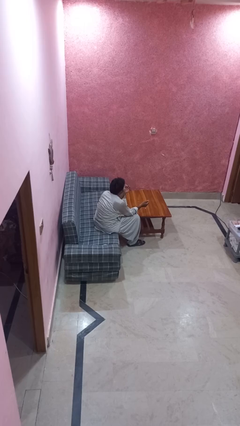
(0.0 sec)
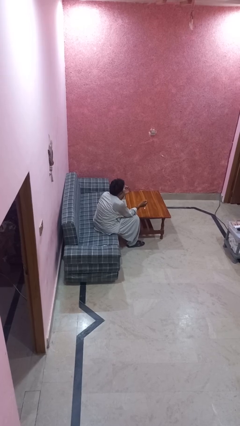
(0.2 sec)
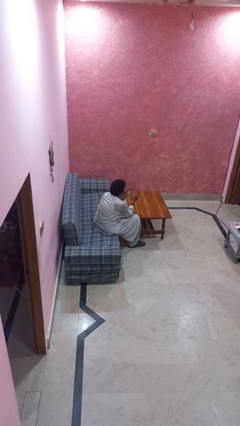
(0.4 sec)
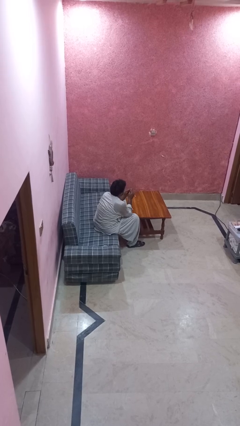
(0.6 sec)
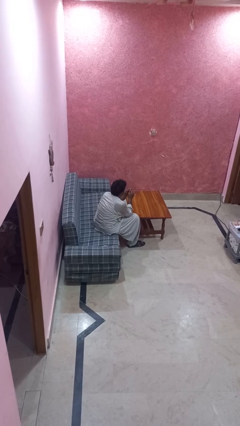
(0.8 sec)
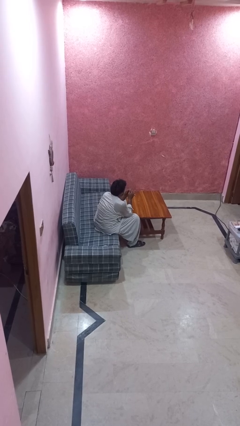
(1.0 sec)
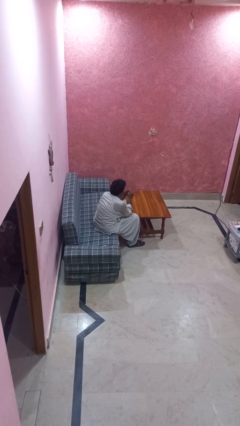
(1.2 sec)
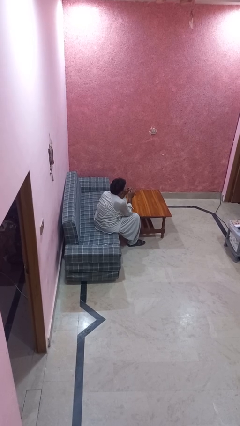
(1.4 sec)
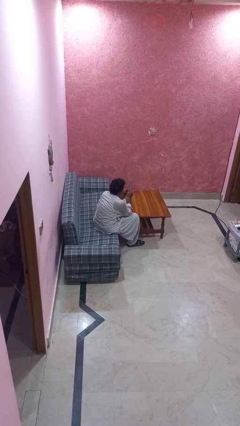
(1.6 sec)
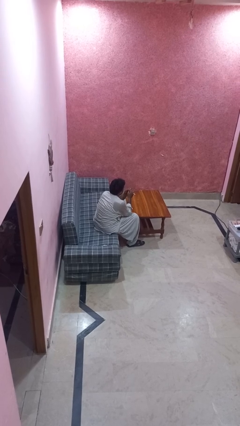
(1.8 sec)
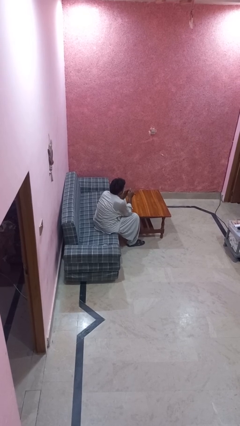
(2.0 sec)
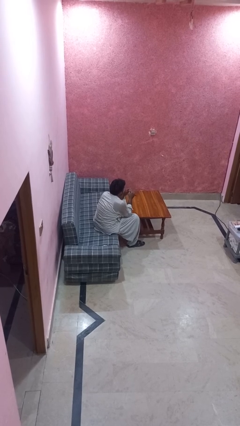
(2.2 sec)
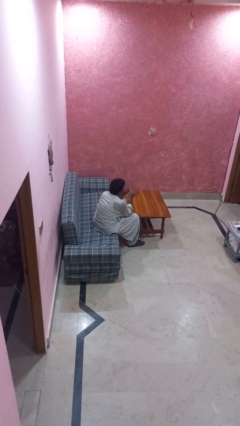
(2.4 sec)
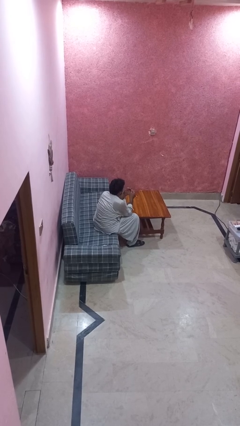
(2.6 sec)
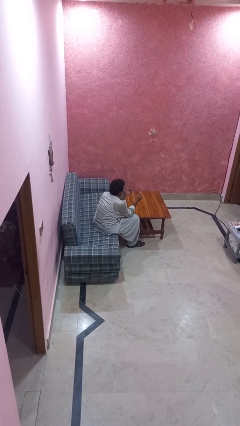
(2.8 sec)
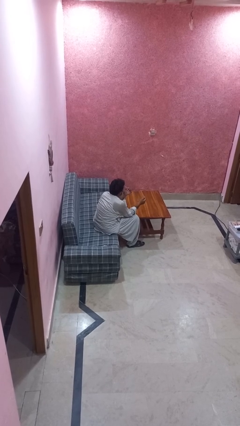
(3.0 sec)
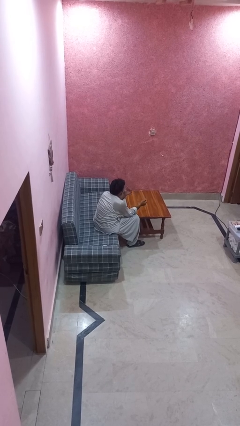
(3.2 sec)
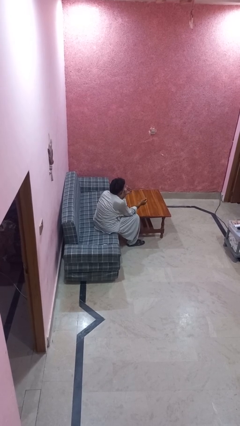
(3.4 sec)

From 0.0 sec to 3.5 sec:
person files fingernails

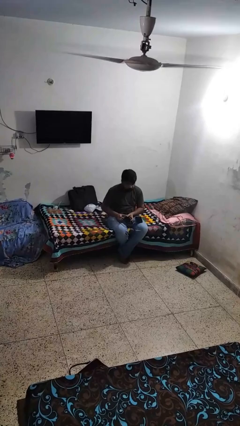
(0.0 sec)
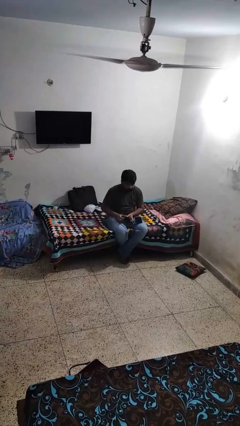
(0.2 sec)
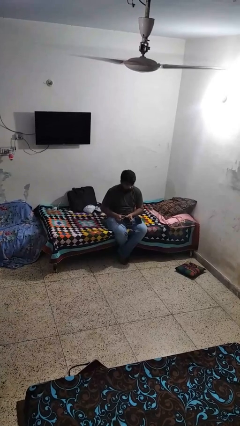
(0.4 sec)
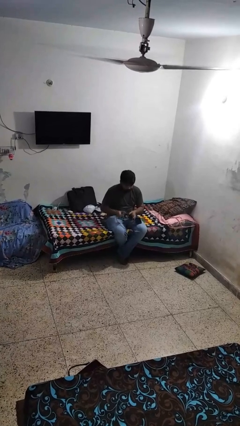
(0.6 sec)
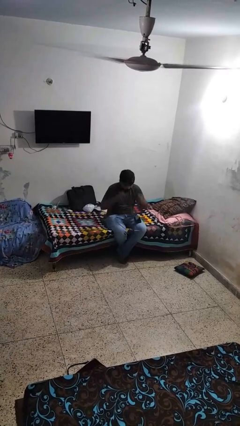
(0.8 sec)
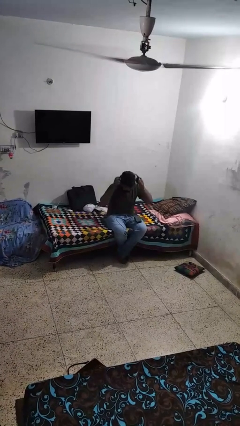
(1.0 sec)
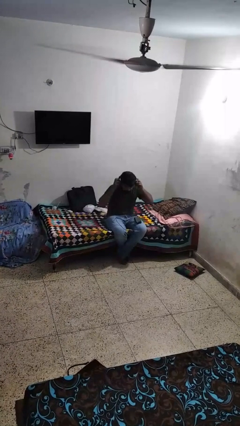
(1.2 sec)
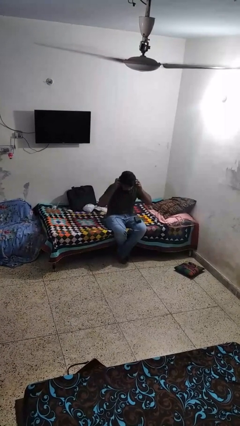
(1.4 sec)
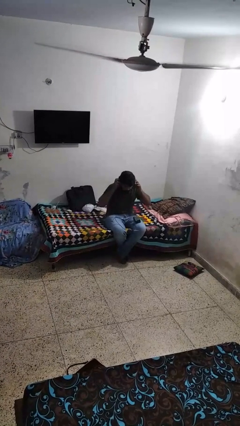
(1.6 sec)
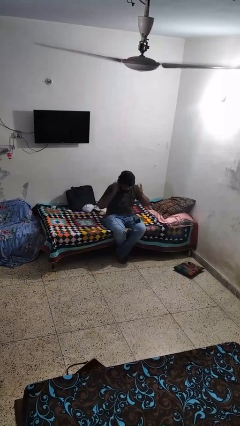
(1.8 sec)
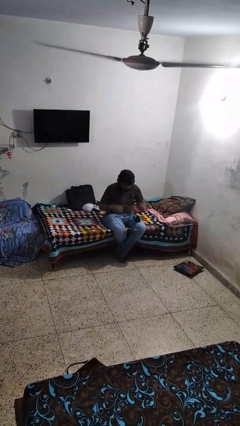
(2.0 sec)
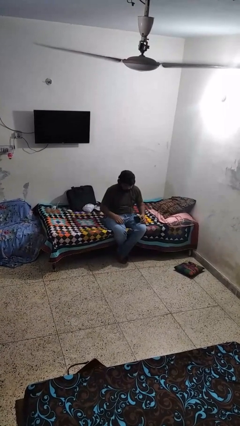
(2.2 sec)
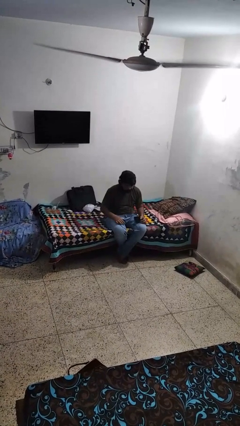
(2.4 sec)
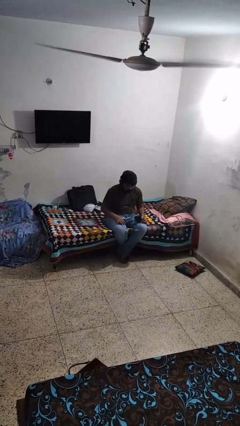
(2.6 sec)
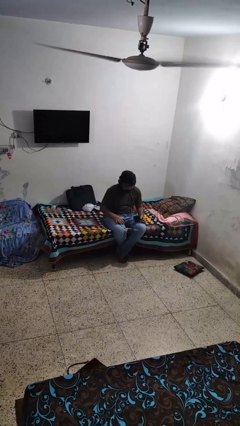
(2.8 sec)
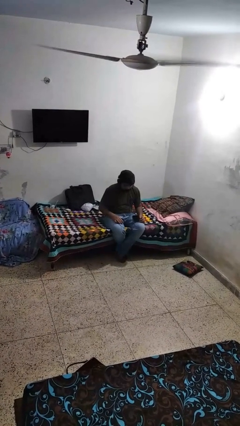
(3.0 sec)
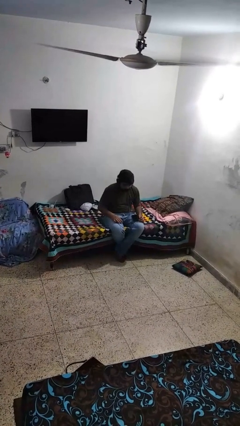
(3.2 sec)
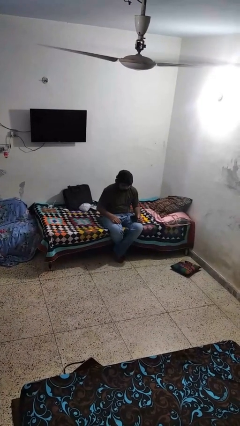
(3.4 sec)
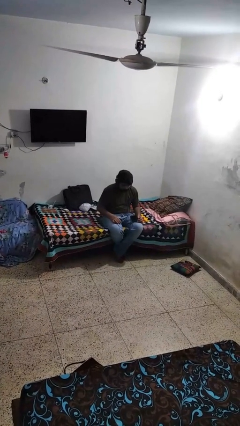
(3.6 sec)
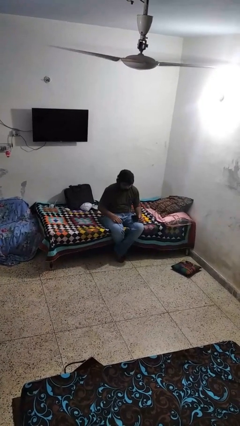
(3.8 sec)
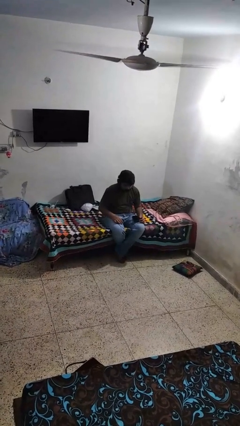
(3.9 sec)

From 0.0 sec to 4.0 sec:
person puts on headphones

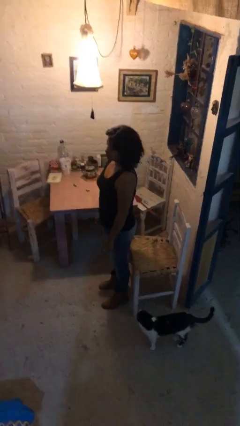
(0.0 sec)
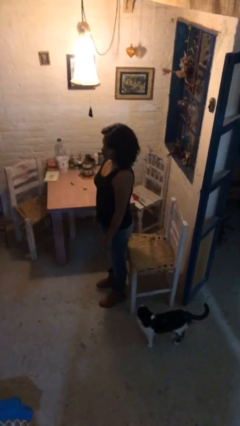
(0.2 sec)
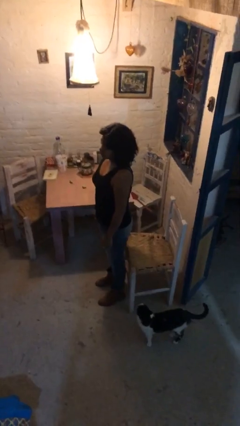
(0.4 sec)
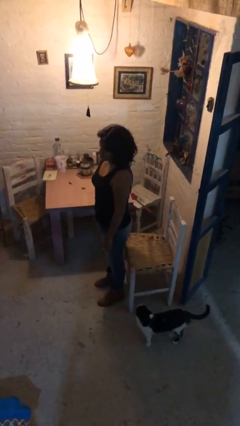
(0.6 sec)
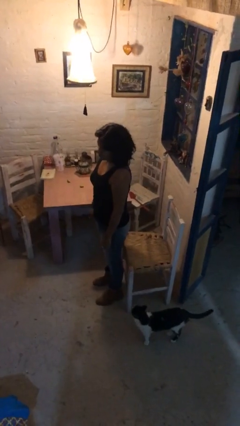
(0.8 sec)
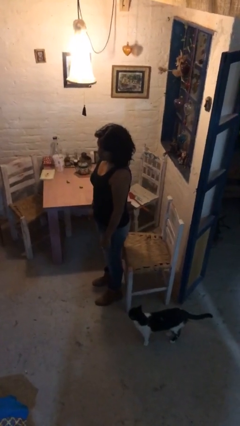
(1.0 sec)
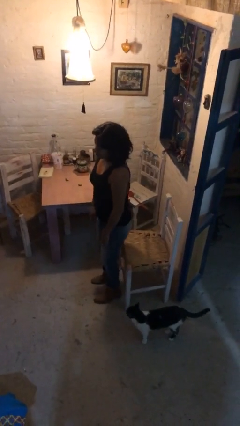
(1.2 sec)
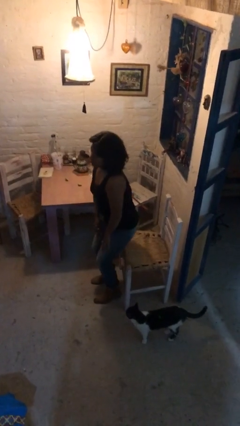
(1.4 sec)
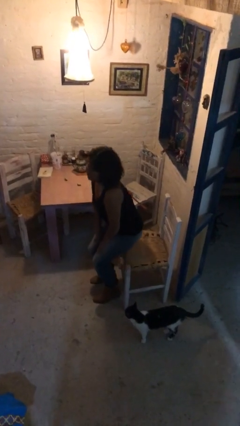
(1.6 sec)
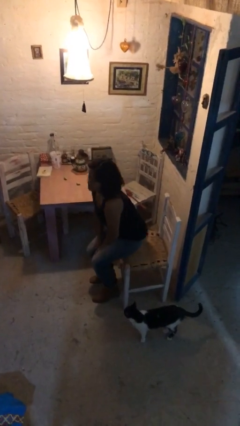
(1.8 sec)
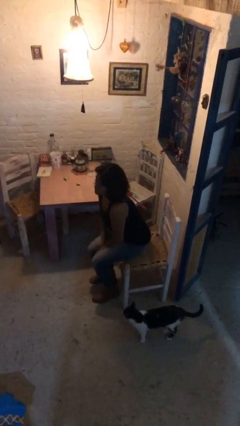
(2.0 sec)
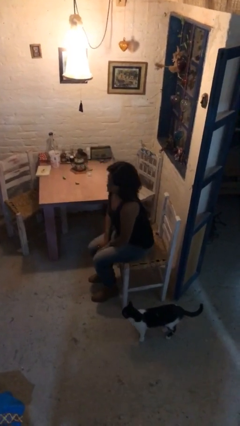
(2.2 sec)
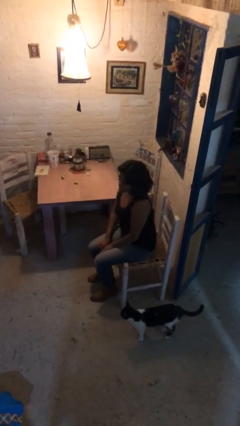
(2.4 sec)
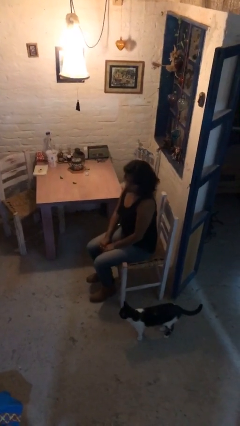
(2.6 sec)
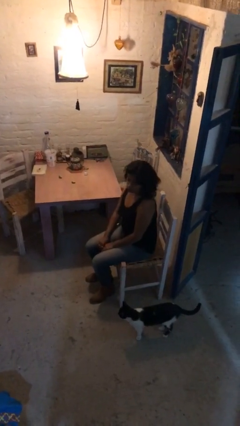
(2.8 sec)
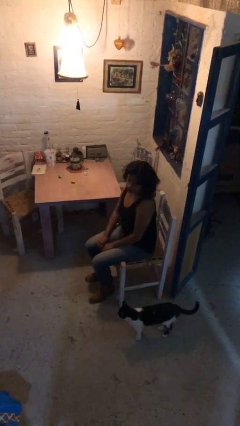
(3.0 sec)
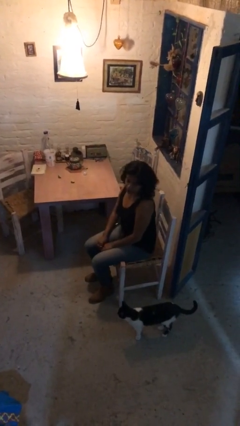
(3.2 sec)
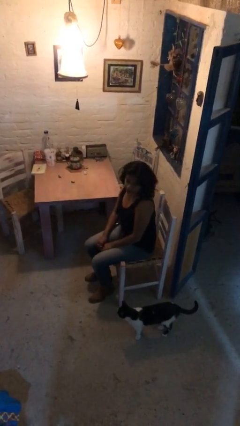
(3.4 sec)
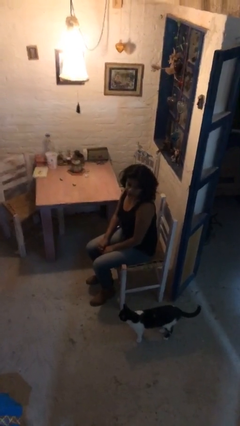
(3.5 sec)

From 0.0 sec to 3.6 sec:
person sits down

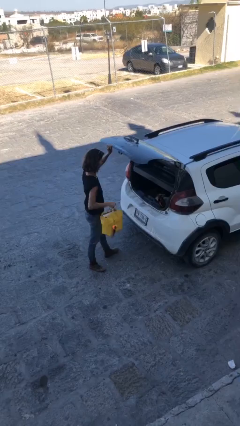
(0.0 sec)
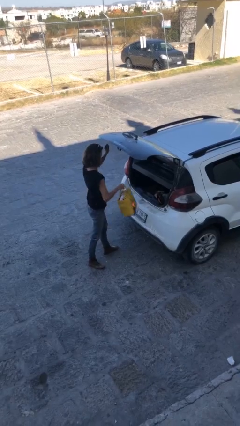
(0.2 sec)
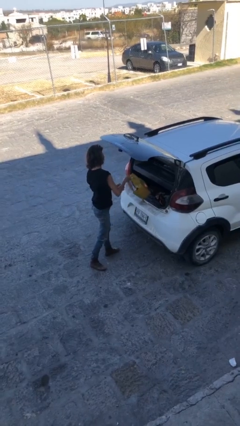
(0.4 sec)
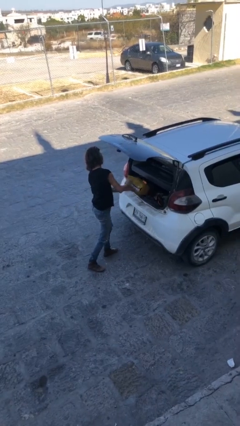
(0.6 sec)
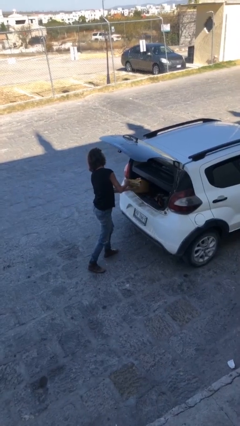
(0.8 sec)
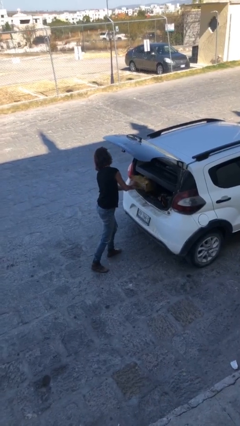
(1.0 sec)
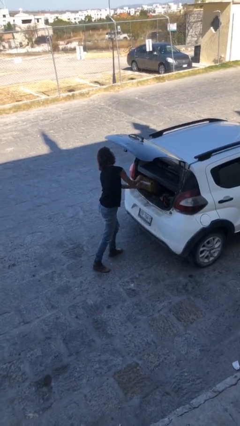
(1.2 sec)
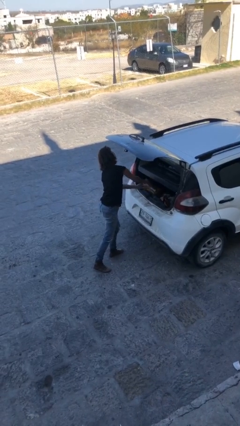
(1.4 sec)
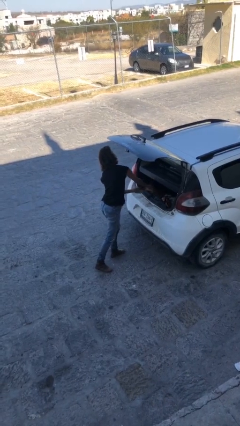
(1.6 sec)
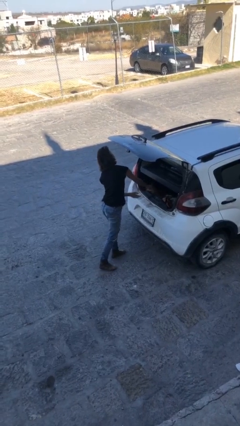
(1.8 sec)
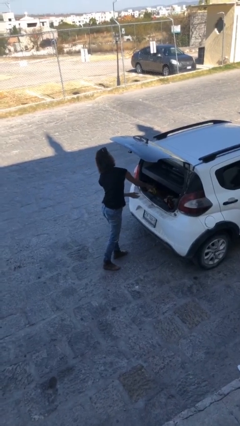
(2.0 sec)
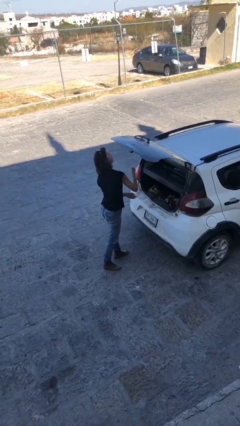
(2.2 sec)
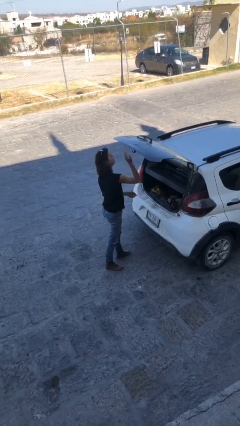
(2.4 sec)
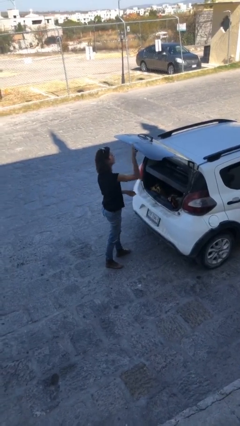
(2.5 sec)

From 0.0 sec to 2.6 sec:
person loads car

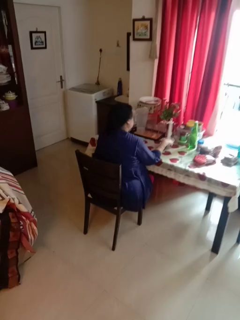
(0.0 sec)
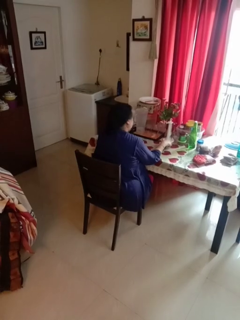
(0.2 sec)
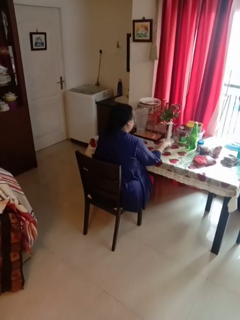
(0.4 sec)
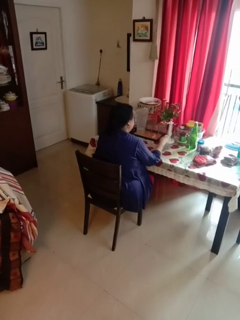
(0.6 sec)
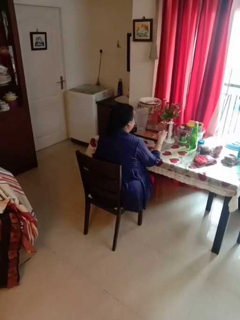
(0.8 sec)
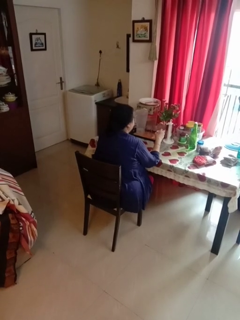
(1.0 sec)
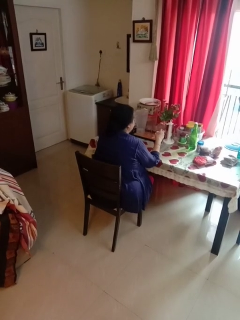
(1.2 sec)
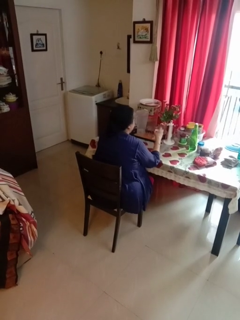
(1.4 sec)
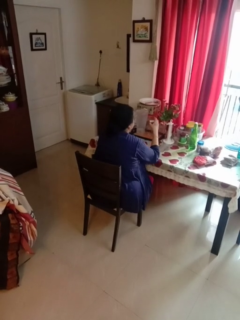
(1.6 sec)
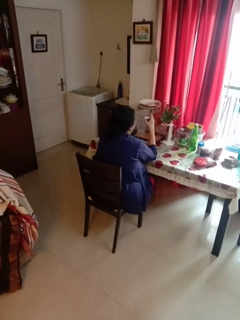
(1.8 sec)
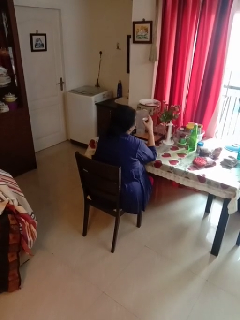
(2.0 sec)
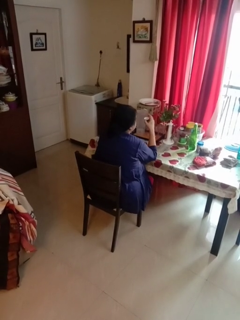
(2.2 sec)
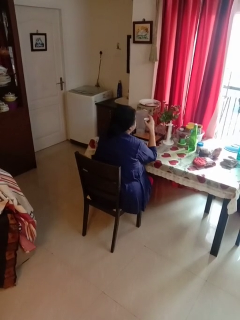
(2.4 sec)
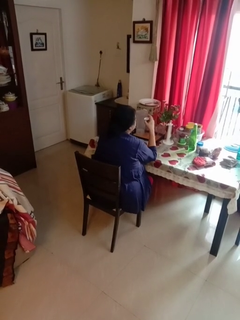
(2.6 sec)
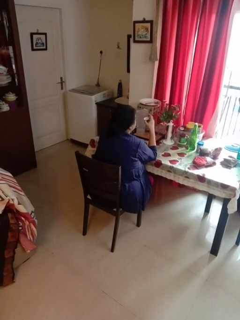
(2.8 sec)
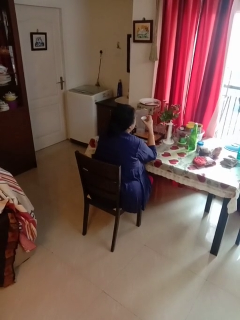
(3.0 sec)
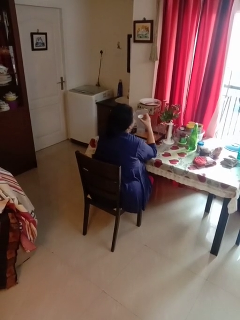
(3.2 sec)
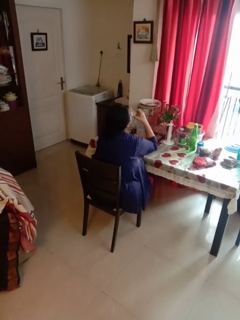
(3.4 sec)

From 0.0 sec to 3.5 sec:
person picks up object from table

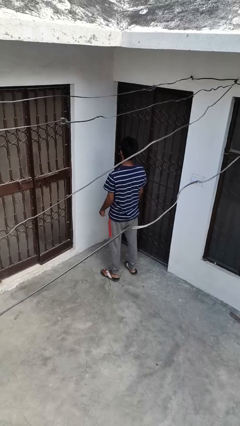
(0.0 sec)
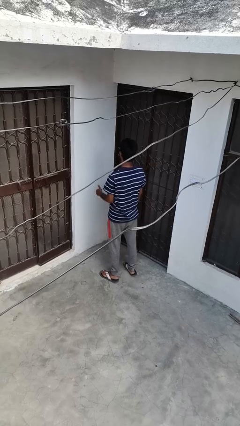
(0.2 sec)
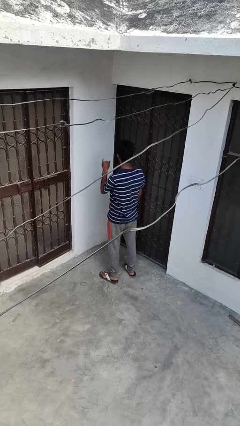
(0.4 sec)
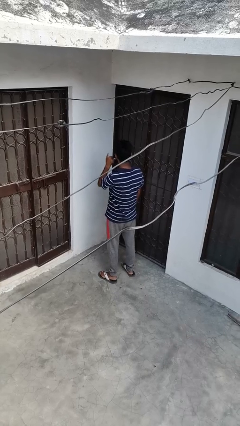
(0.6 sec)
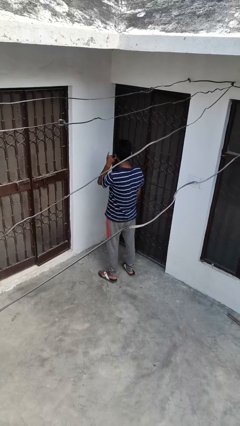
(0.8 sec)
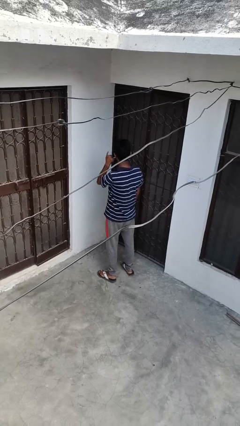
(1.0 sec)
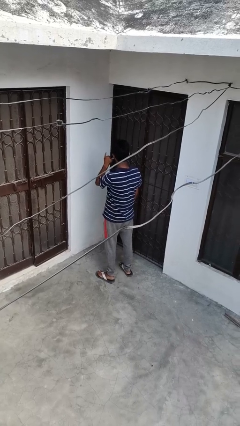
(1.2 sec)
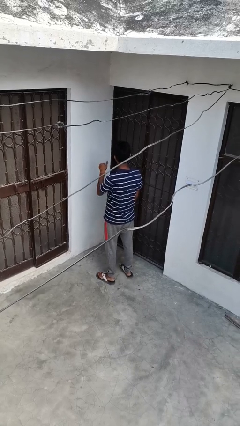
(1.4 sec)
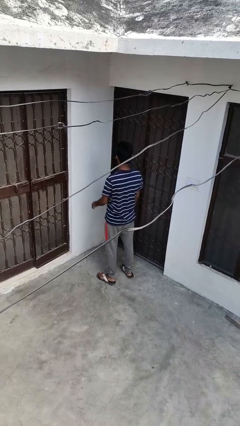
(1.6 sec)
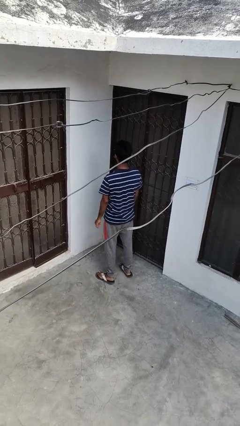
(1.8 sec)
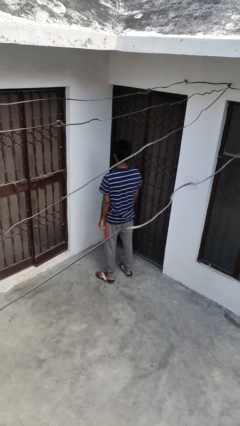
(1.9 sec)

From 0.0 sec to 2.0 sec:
person gestures call me
